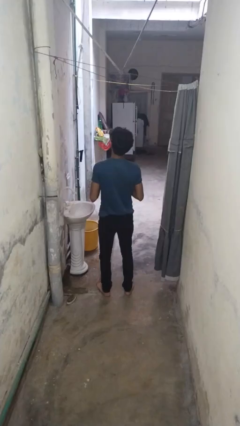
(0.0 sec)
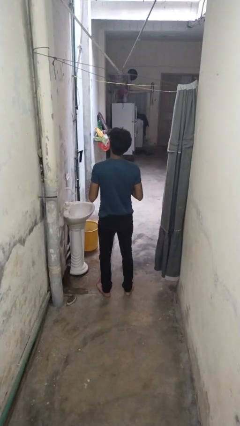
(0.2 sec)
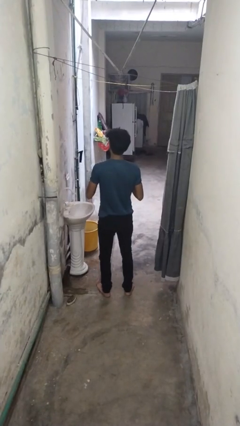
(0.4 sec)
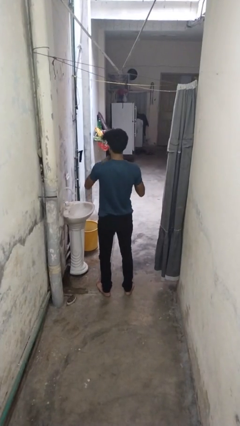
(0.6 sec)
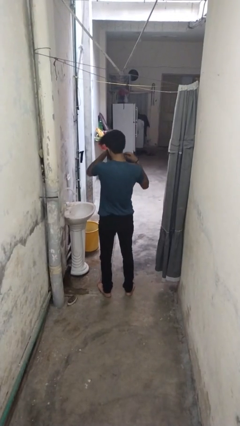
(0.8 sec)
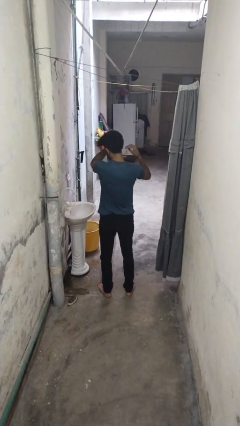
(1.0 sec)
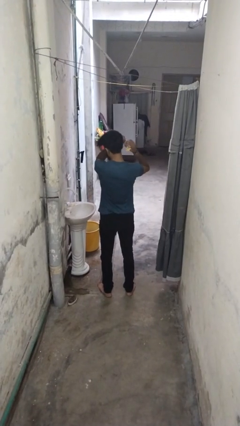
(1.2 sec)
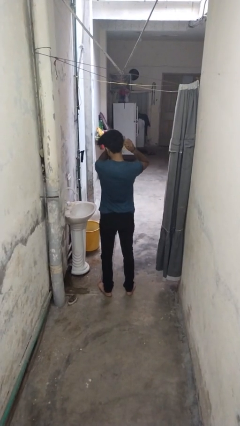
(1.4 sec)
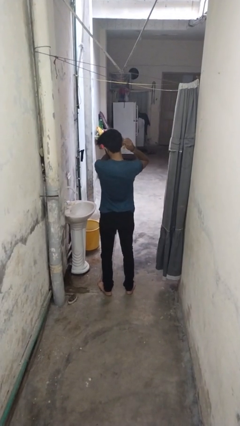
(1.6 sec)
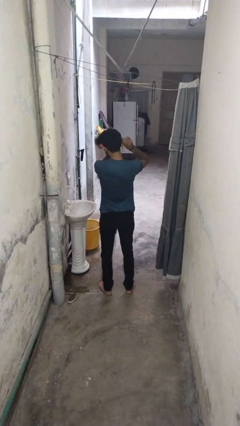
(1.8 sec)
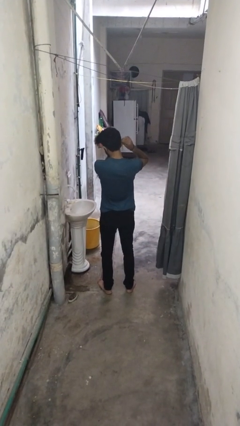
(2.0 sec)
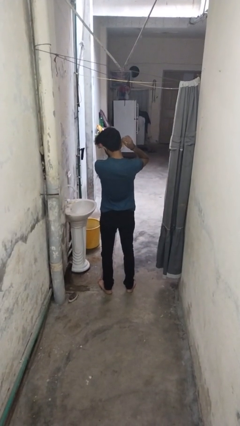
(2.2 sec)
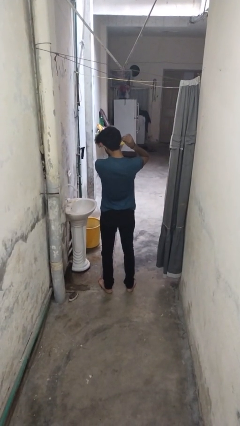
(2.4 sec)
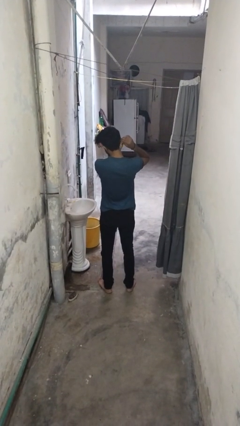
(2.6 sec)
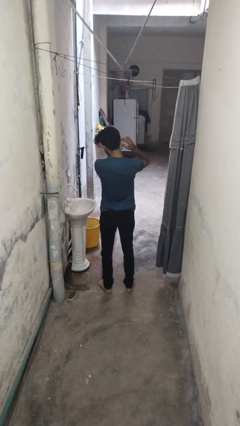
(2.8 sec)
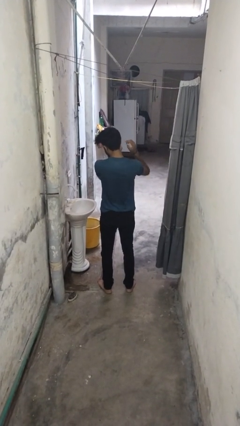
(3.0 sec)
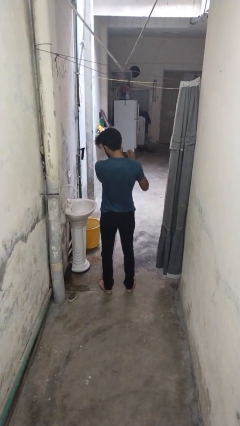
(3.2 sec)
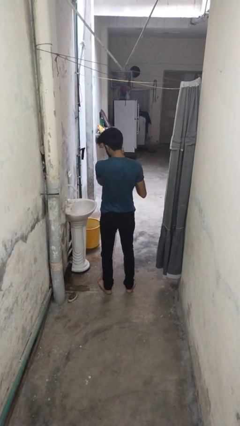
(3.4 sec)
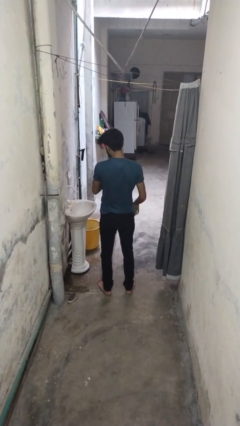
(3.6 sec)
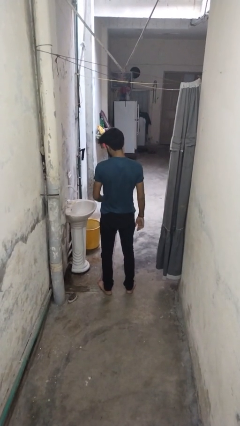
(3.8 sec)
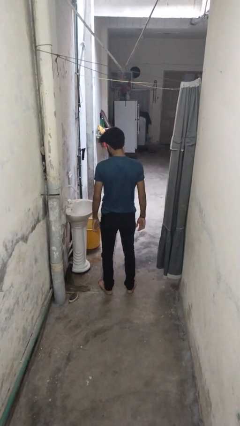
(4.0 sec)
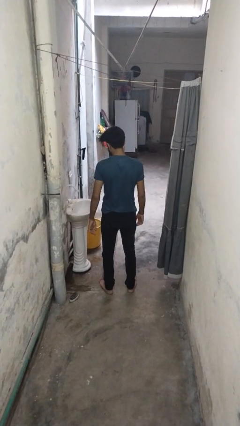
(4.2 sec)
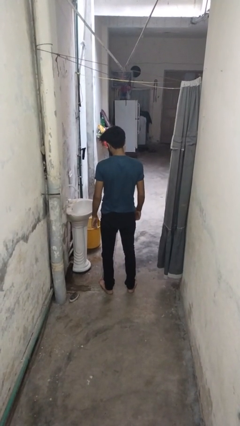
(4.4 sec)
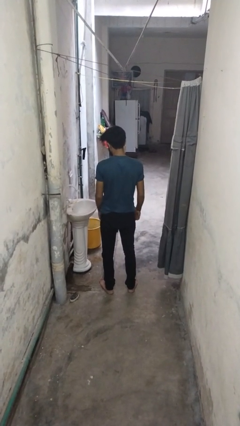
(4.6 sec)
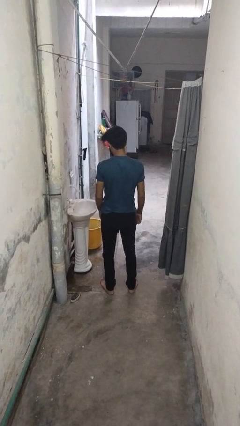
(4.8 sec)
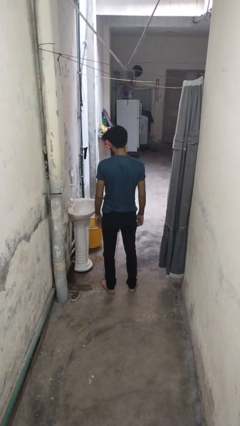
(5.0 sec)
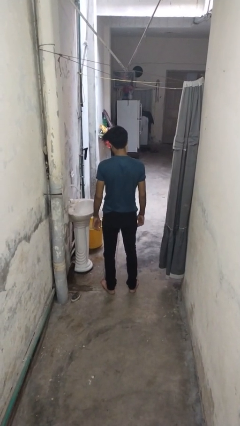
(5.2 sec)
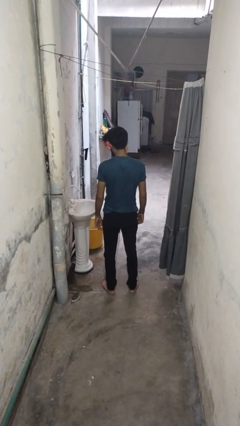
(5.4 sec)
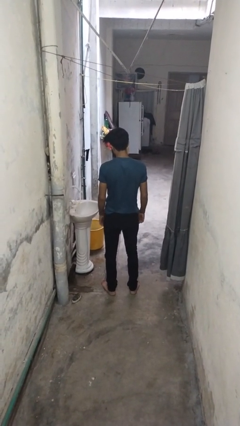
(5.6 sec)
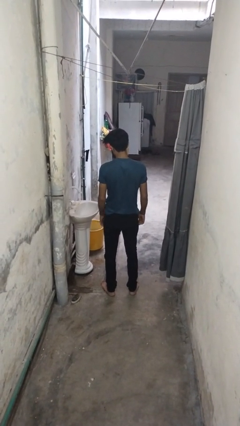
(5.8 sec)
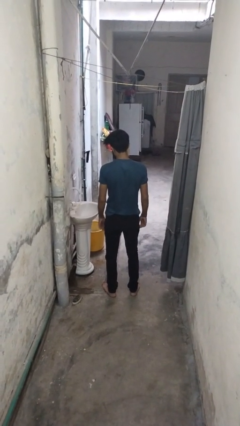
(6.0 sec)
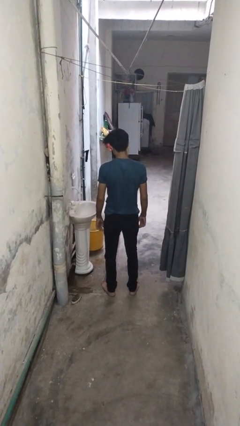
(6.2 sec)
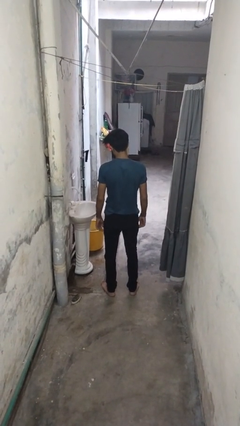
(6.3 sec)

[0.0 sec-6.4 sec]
person puts on earrings

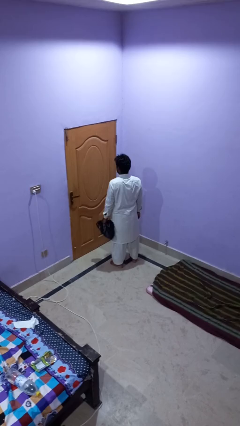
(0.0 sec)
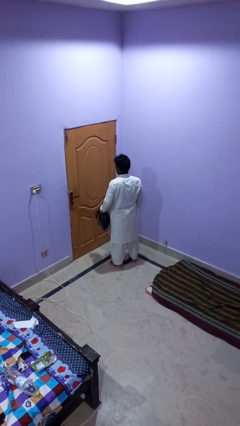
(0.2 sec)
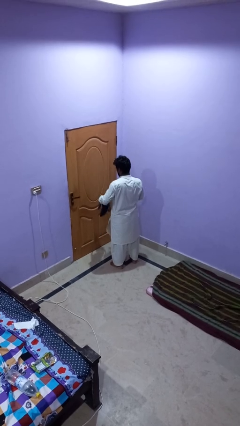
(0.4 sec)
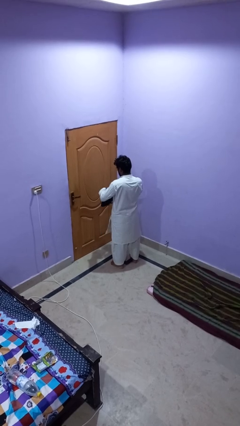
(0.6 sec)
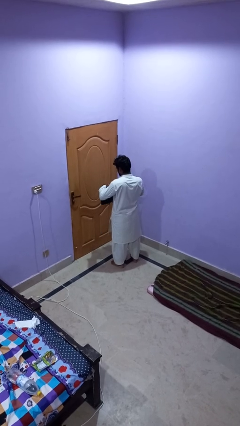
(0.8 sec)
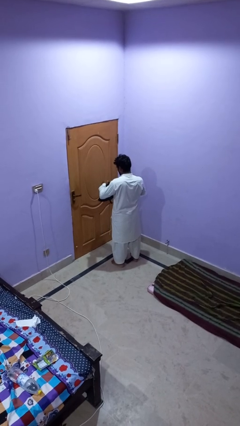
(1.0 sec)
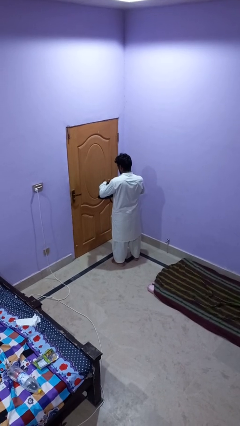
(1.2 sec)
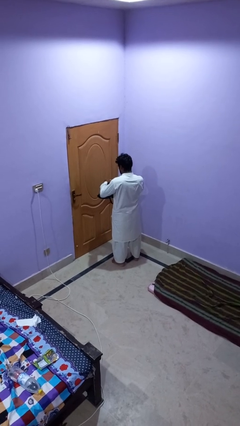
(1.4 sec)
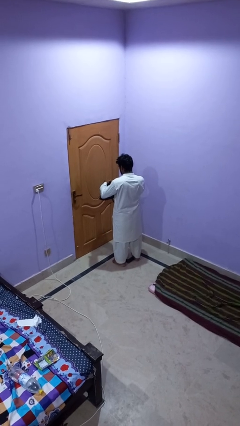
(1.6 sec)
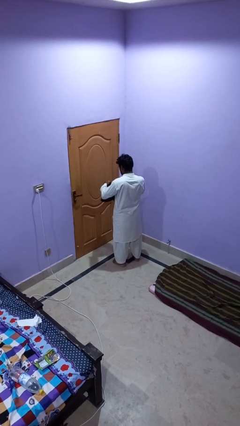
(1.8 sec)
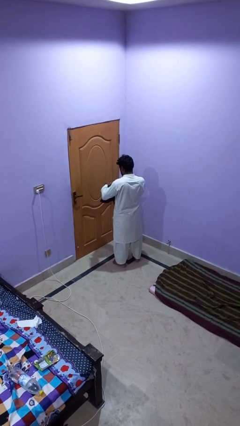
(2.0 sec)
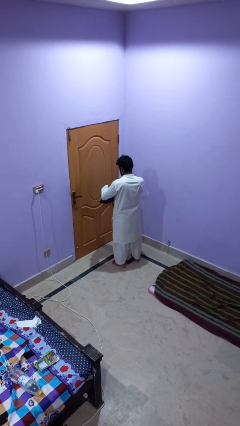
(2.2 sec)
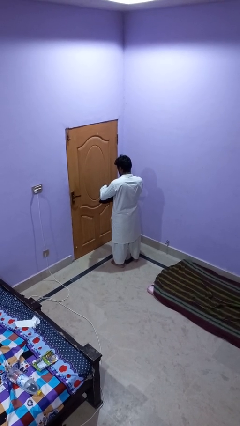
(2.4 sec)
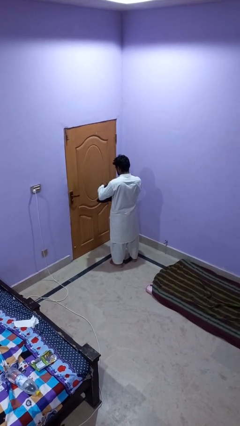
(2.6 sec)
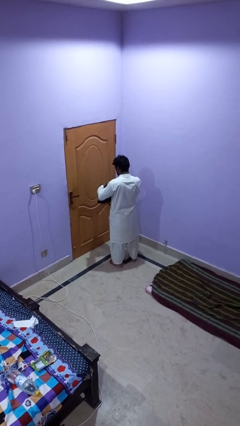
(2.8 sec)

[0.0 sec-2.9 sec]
person searches in purse

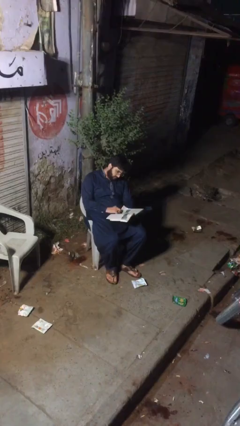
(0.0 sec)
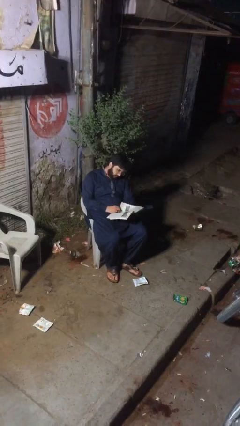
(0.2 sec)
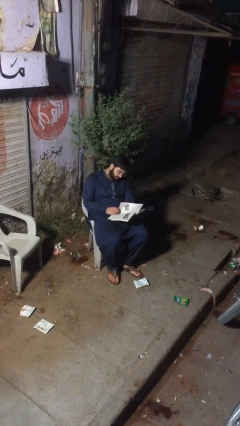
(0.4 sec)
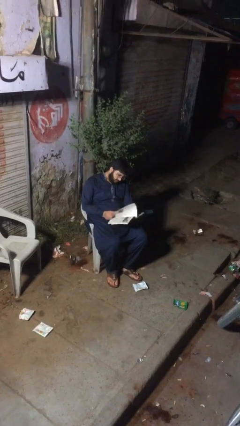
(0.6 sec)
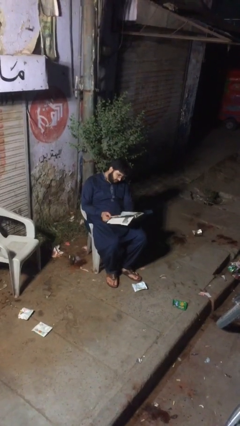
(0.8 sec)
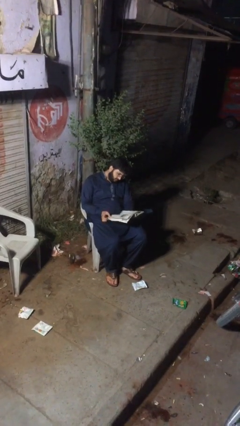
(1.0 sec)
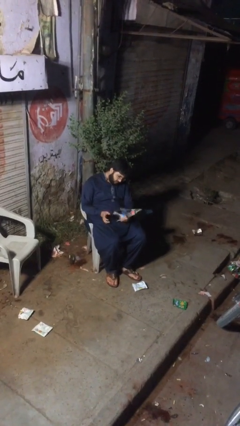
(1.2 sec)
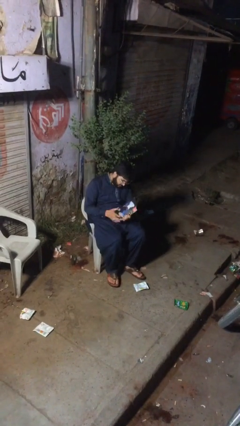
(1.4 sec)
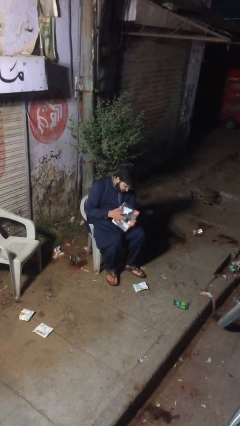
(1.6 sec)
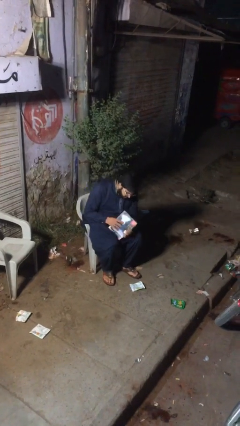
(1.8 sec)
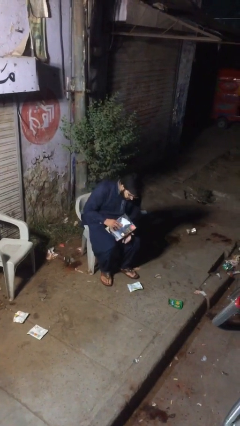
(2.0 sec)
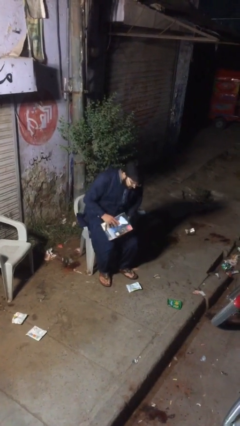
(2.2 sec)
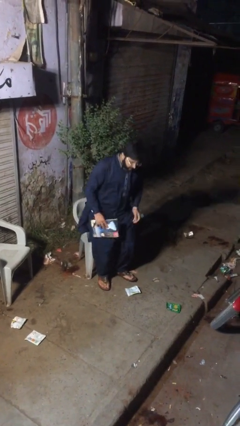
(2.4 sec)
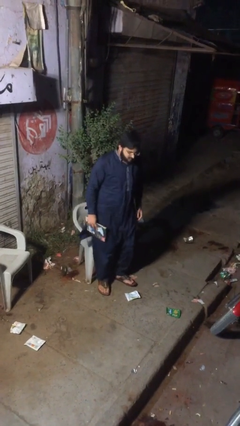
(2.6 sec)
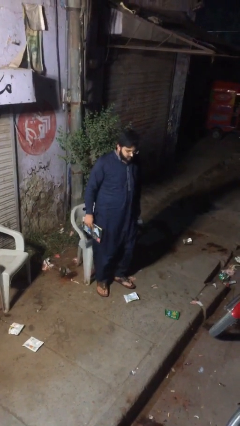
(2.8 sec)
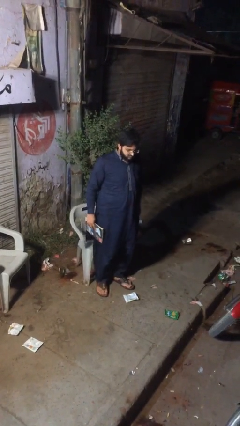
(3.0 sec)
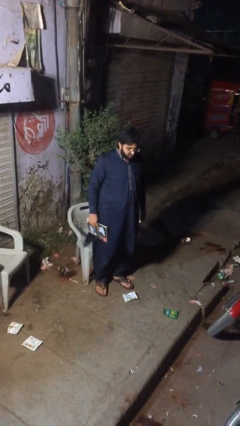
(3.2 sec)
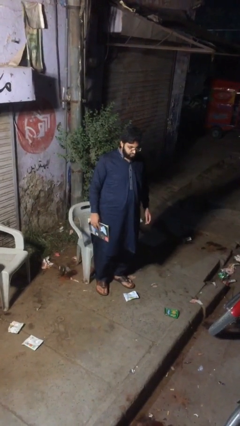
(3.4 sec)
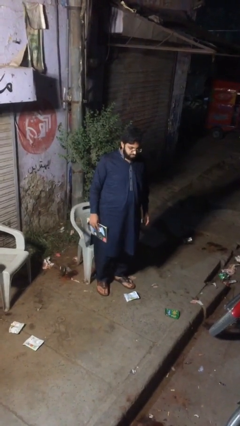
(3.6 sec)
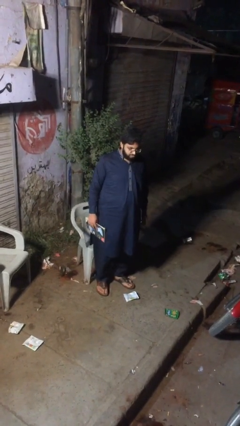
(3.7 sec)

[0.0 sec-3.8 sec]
person stands up

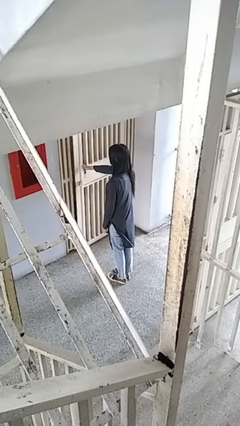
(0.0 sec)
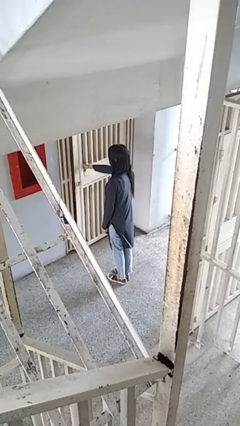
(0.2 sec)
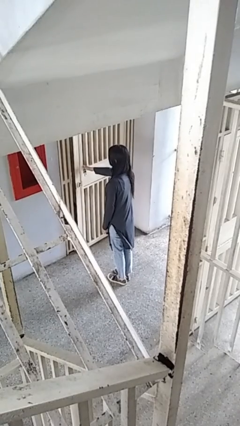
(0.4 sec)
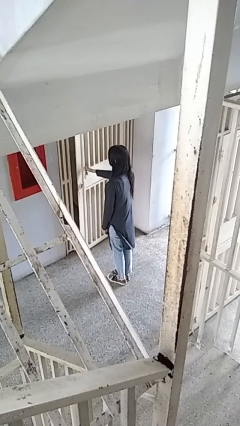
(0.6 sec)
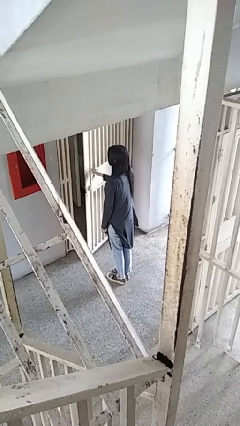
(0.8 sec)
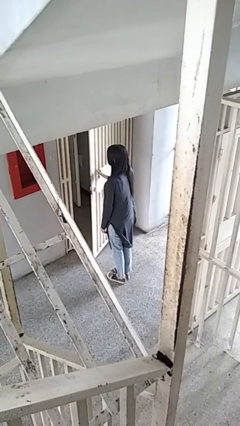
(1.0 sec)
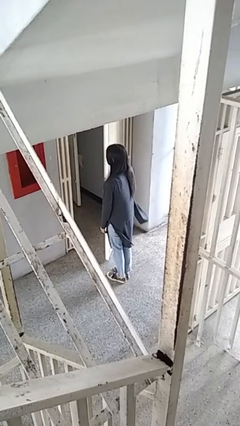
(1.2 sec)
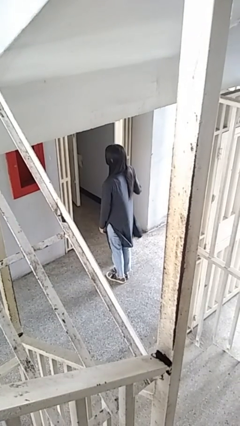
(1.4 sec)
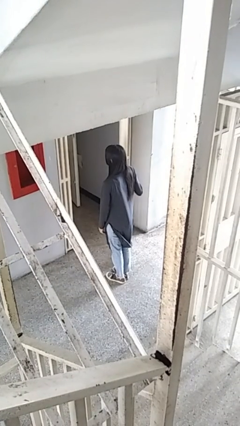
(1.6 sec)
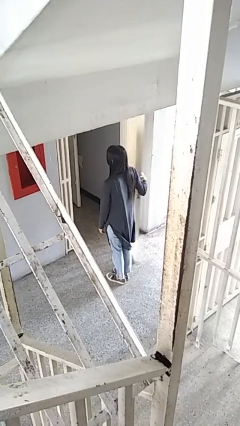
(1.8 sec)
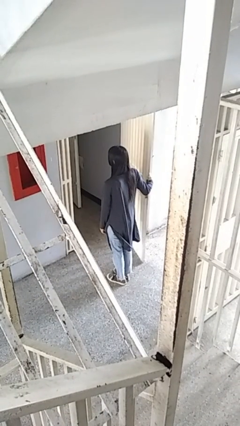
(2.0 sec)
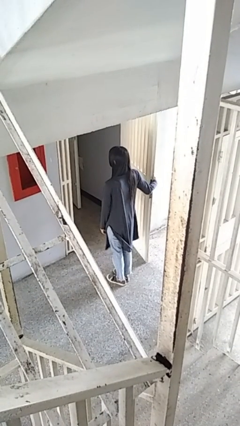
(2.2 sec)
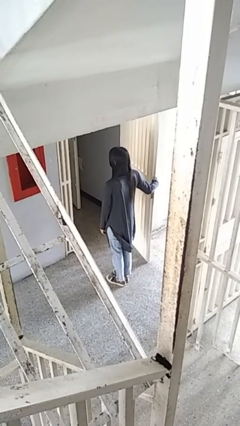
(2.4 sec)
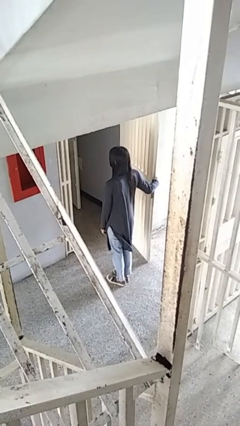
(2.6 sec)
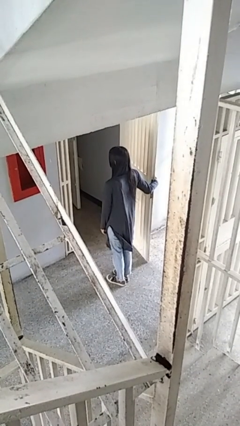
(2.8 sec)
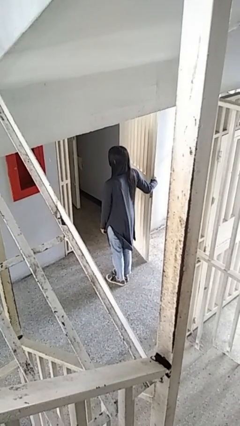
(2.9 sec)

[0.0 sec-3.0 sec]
person opens gate

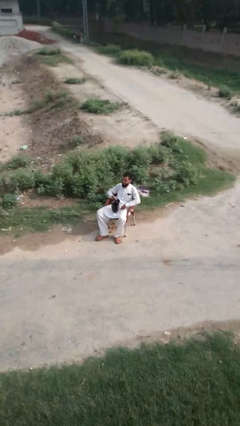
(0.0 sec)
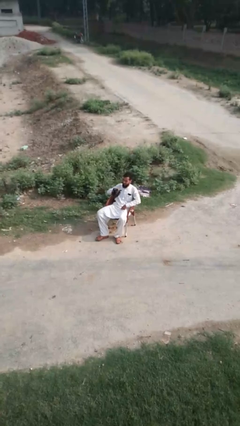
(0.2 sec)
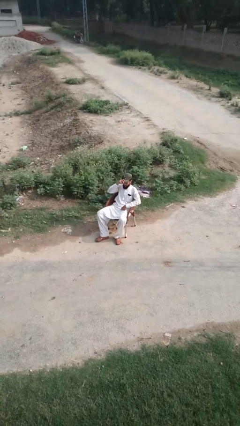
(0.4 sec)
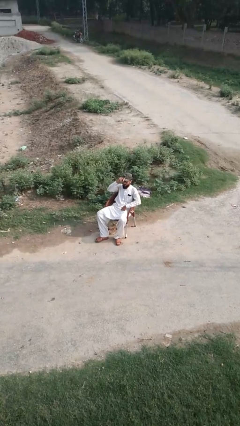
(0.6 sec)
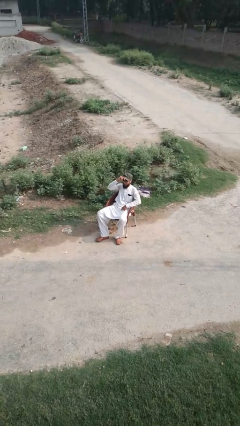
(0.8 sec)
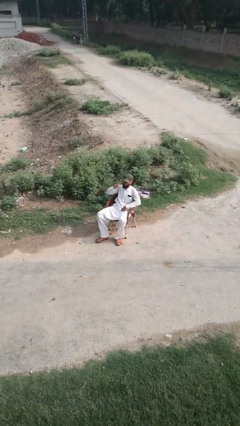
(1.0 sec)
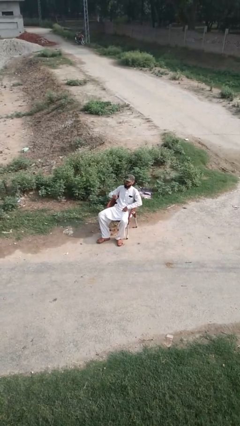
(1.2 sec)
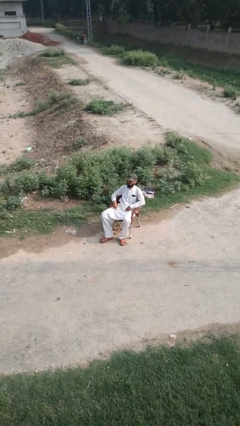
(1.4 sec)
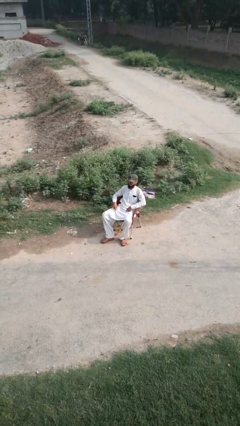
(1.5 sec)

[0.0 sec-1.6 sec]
person puts on hat
